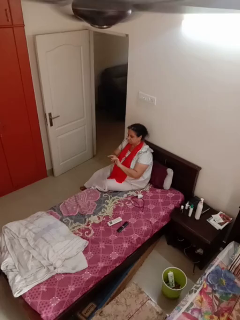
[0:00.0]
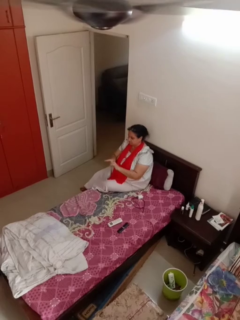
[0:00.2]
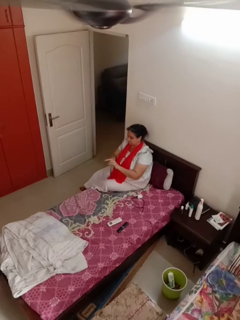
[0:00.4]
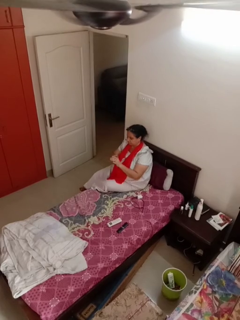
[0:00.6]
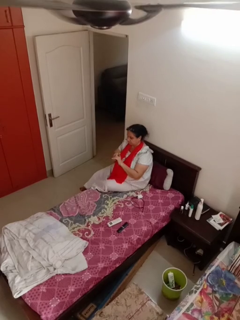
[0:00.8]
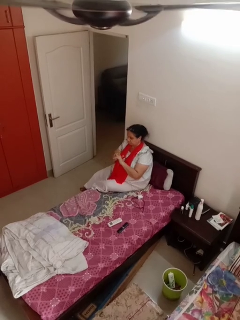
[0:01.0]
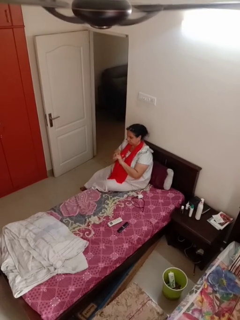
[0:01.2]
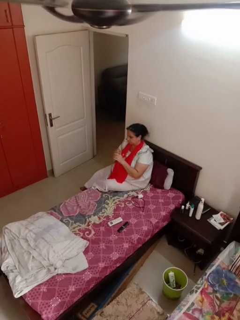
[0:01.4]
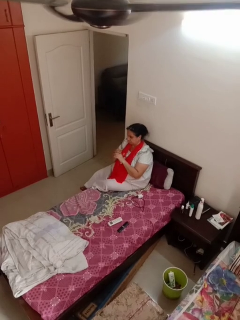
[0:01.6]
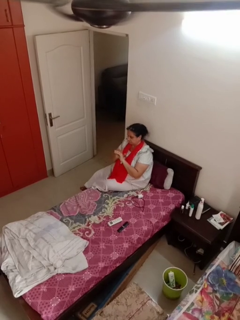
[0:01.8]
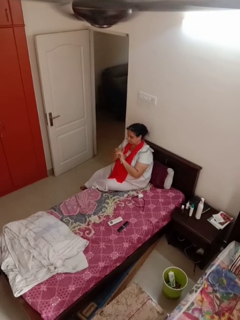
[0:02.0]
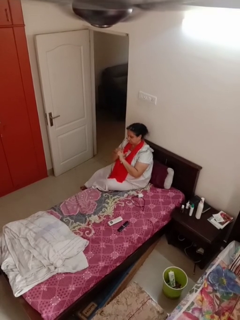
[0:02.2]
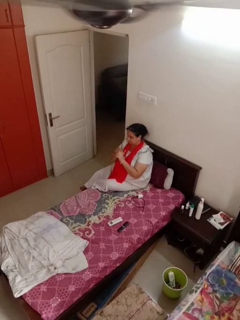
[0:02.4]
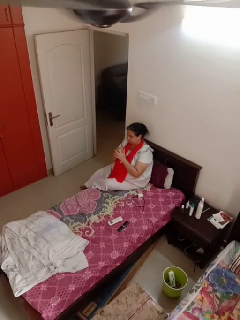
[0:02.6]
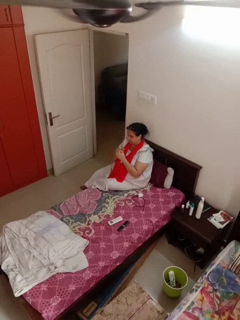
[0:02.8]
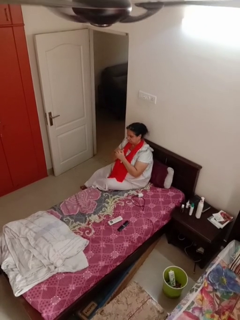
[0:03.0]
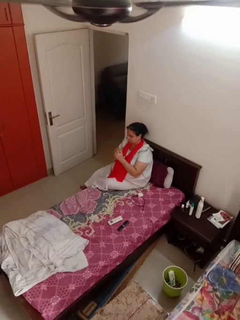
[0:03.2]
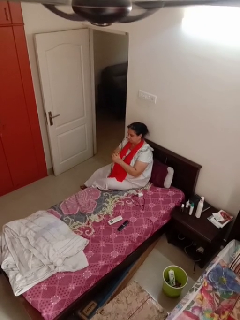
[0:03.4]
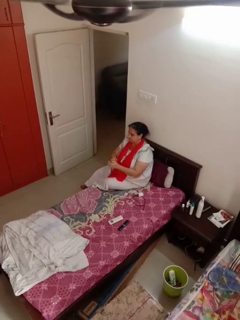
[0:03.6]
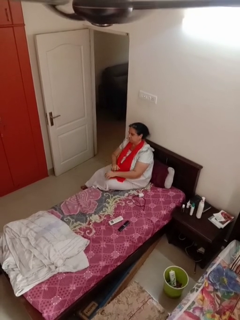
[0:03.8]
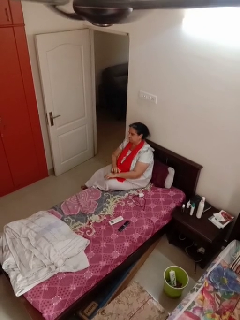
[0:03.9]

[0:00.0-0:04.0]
person cracks knuckles

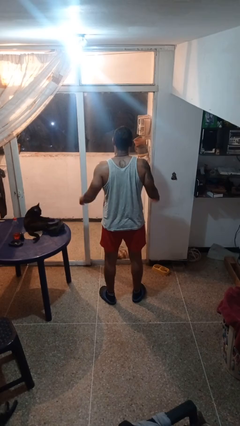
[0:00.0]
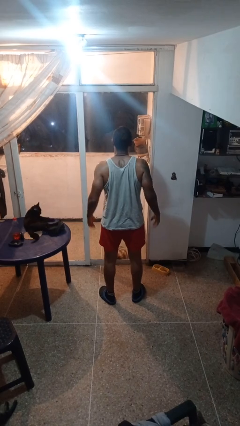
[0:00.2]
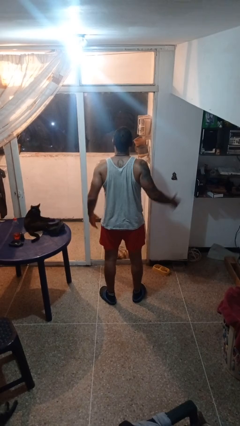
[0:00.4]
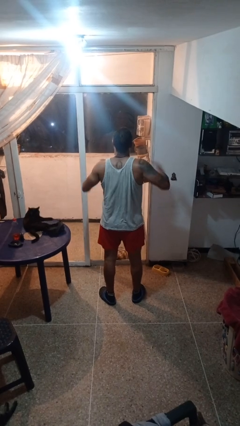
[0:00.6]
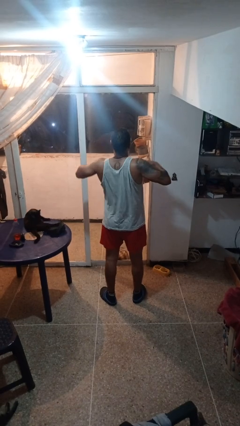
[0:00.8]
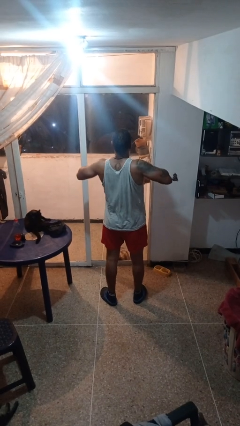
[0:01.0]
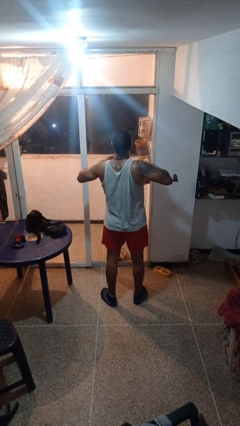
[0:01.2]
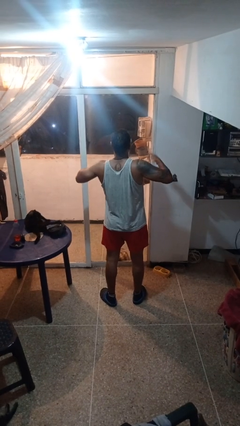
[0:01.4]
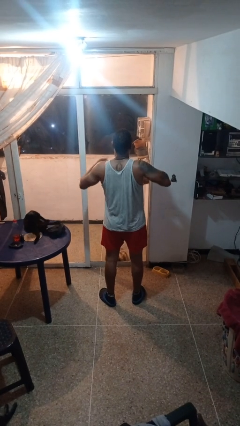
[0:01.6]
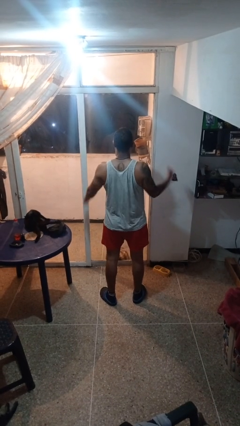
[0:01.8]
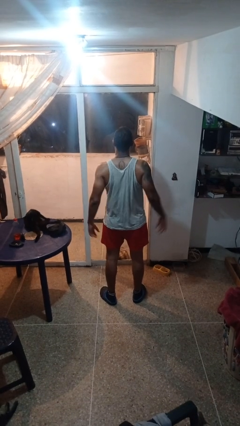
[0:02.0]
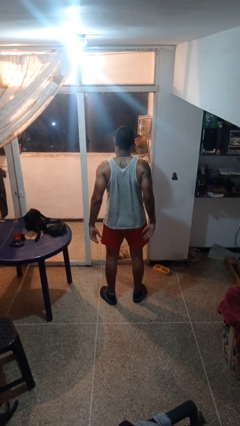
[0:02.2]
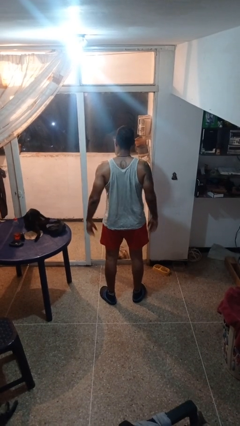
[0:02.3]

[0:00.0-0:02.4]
person drums on chest

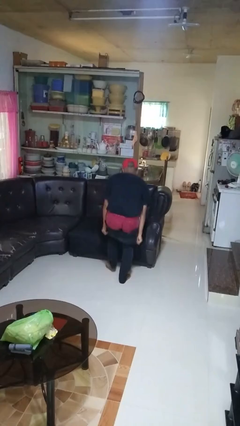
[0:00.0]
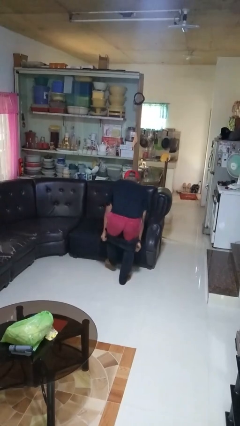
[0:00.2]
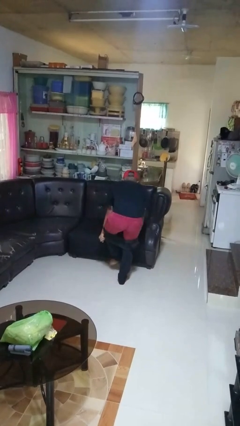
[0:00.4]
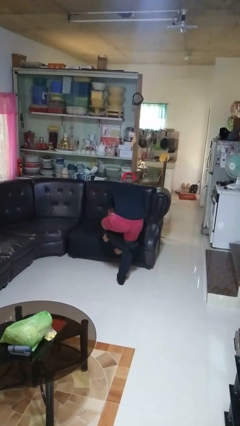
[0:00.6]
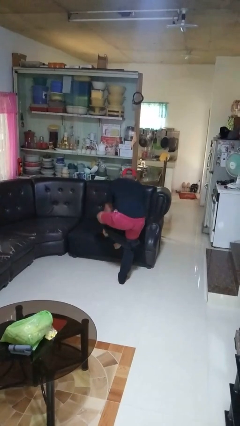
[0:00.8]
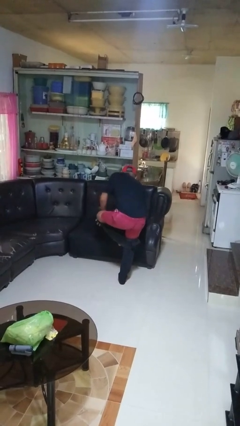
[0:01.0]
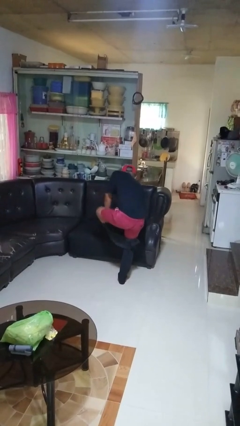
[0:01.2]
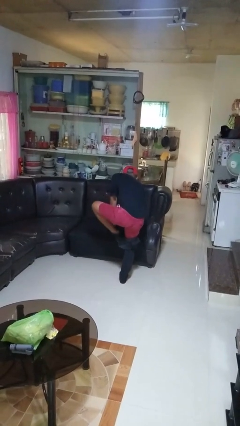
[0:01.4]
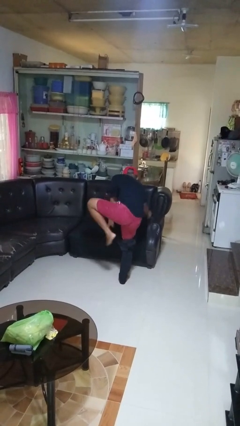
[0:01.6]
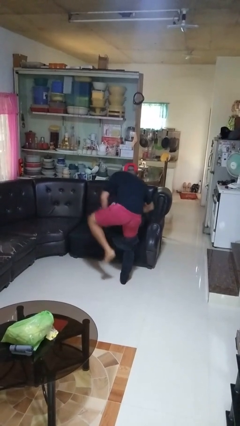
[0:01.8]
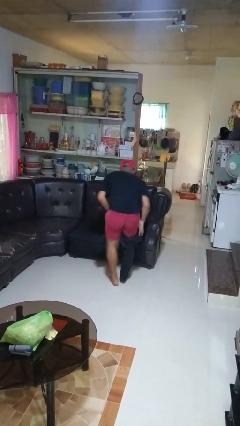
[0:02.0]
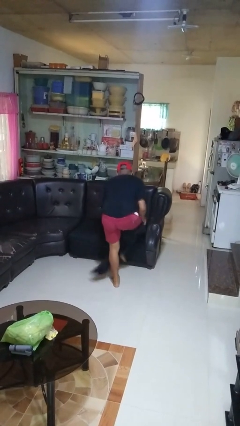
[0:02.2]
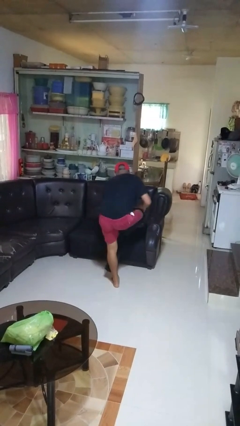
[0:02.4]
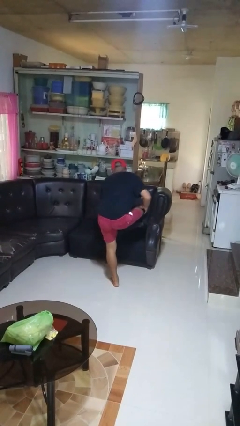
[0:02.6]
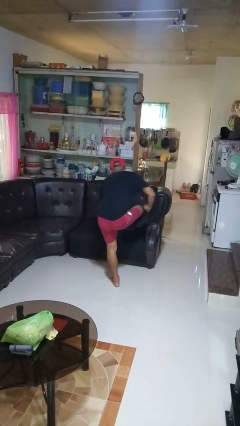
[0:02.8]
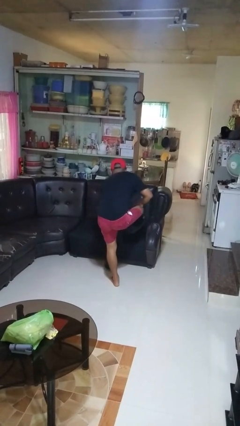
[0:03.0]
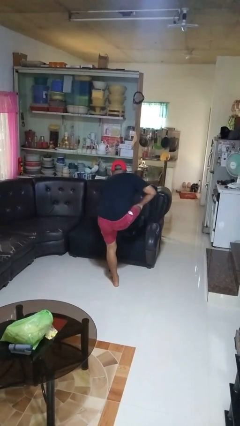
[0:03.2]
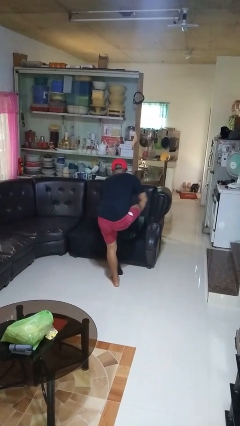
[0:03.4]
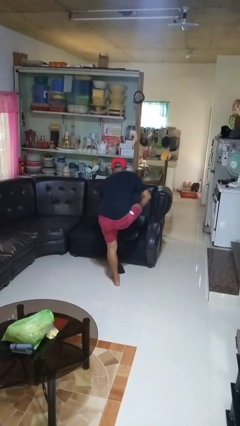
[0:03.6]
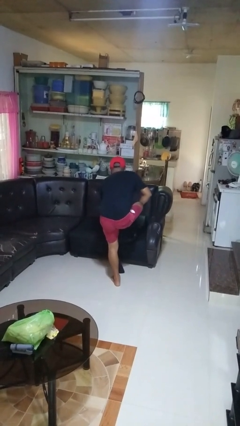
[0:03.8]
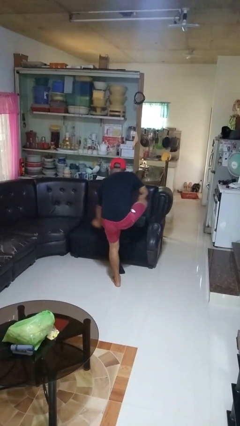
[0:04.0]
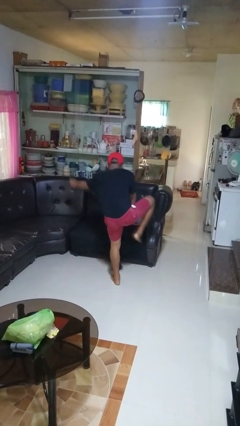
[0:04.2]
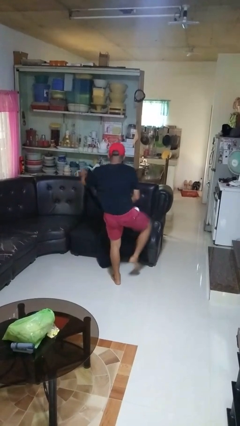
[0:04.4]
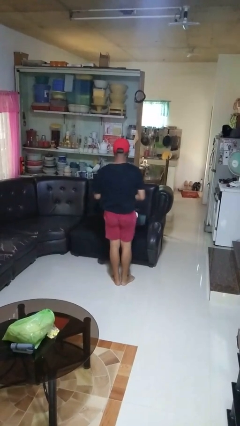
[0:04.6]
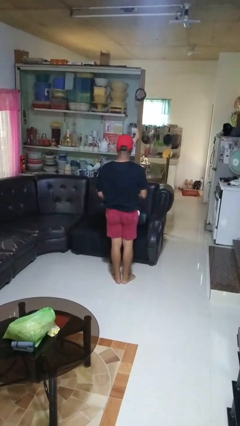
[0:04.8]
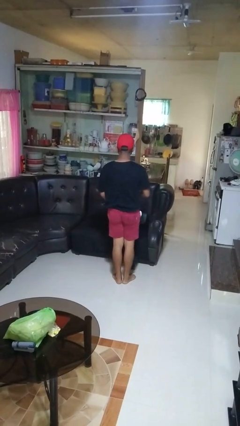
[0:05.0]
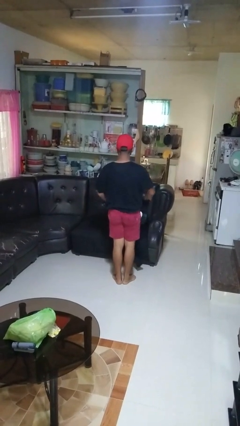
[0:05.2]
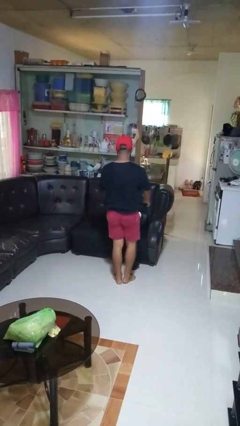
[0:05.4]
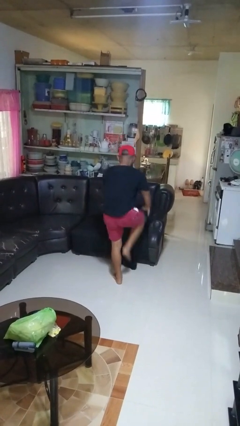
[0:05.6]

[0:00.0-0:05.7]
person takes off pants

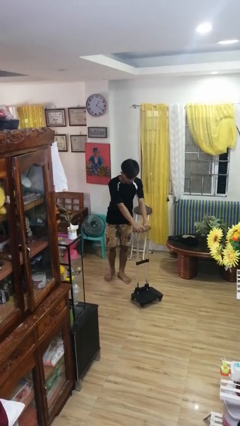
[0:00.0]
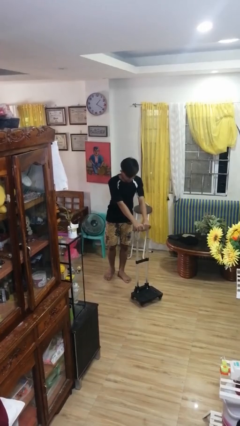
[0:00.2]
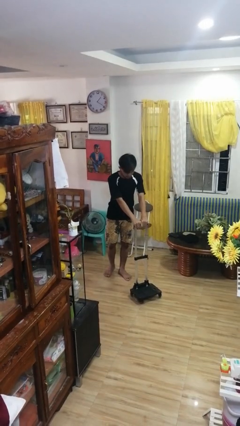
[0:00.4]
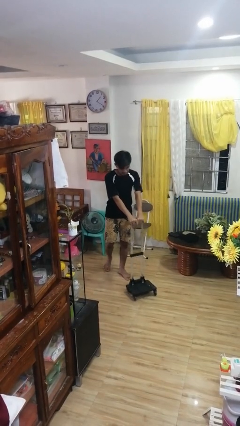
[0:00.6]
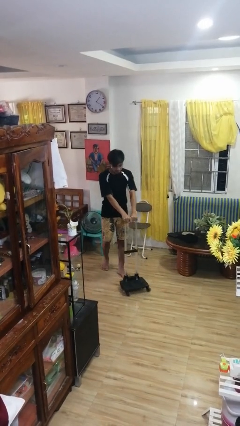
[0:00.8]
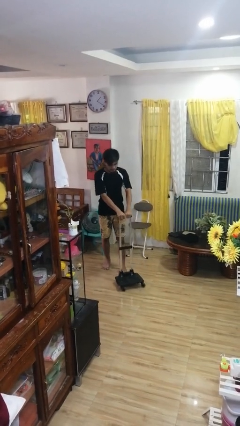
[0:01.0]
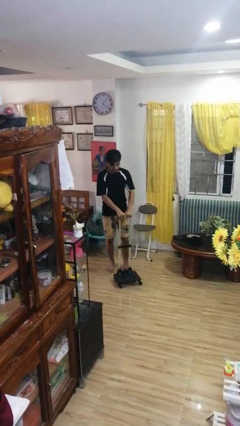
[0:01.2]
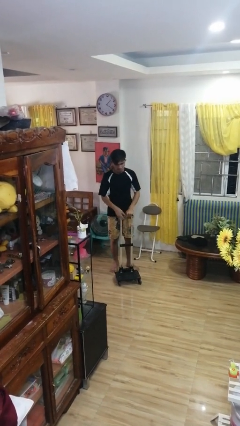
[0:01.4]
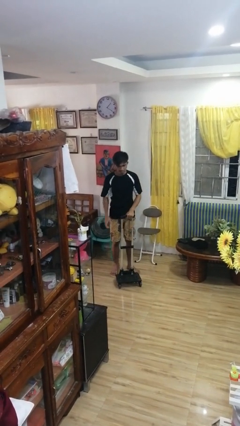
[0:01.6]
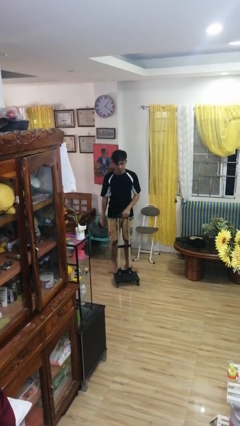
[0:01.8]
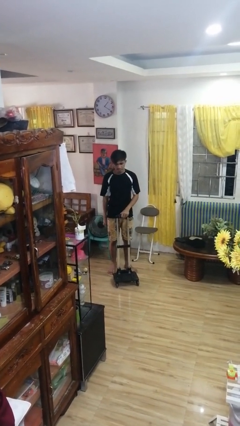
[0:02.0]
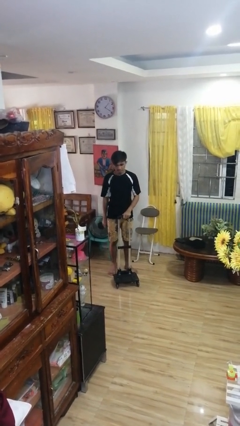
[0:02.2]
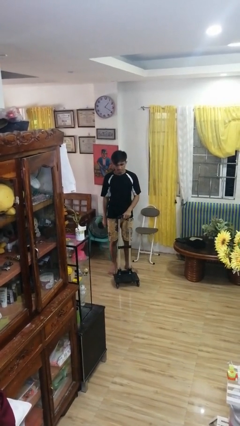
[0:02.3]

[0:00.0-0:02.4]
person pulls wheeled cart

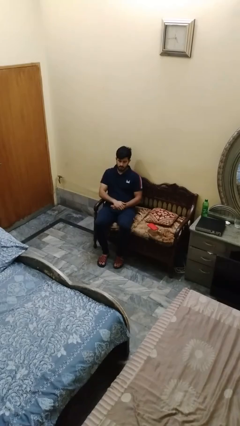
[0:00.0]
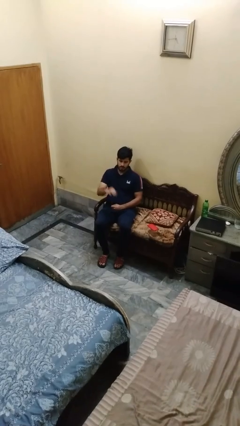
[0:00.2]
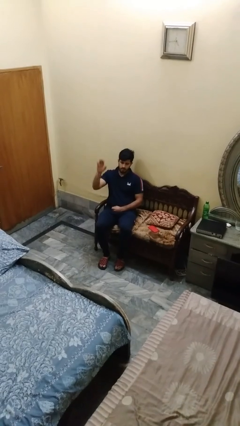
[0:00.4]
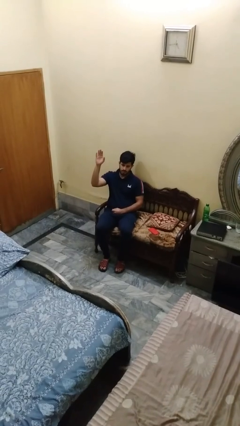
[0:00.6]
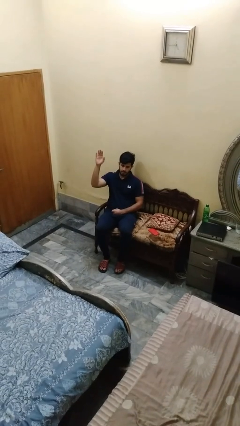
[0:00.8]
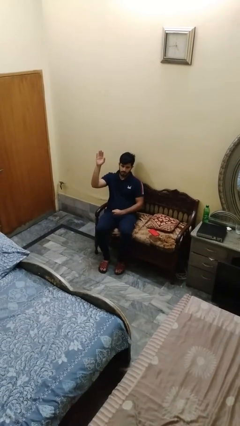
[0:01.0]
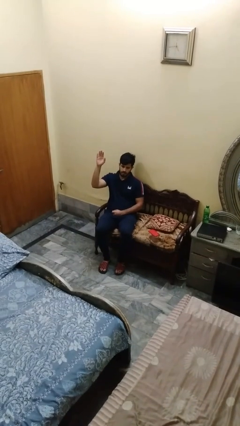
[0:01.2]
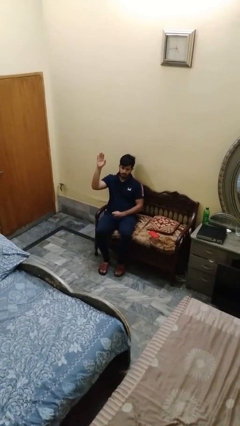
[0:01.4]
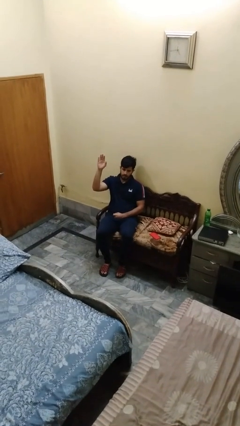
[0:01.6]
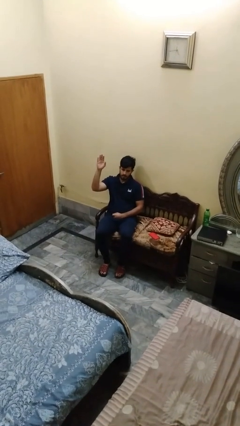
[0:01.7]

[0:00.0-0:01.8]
person gestures raise hand

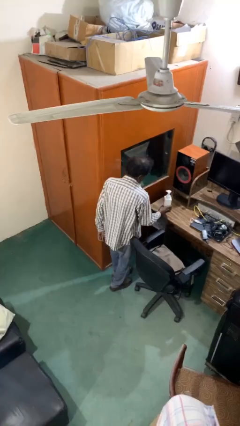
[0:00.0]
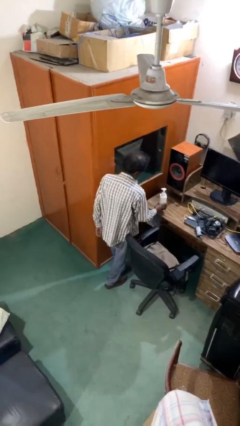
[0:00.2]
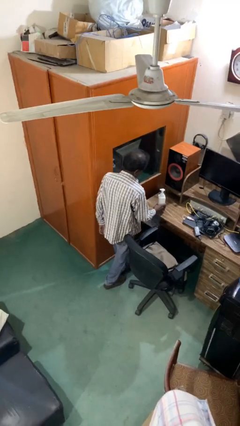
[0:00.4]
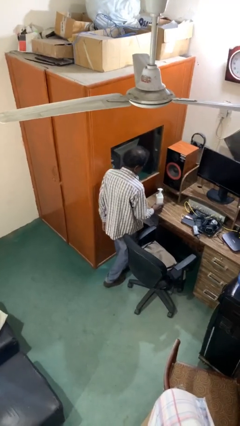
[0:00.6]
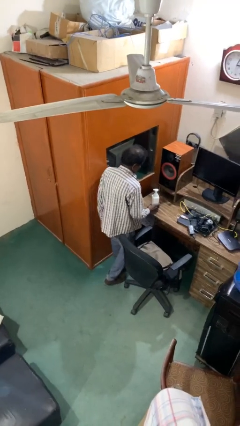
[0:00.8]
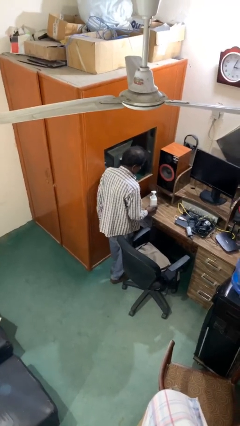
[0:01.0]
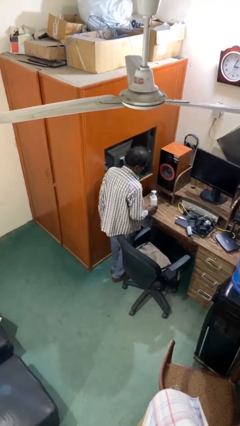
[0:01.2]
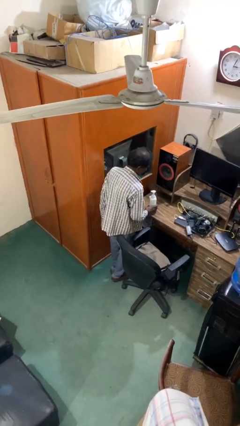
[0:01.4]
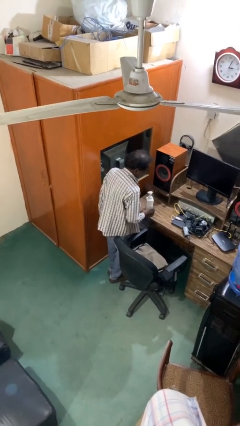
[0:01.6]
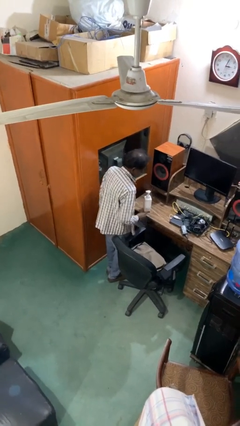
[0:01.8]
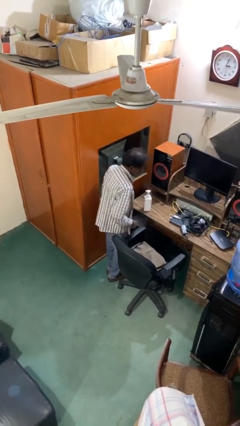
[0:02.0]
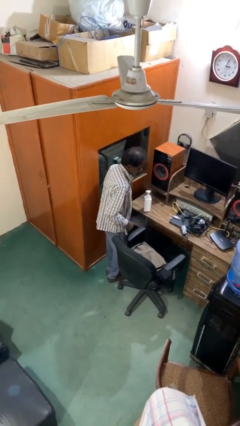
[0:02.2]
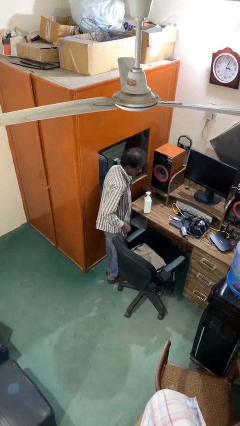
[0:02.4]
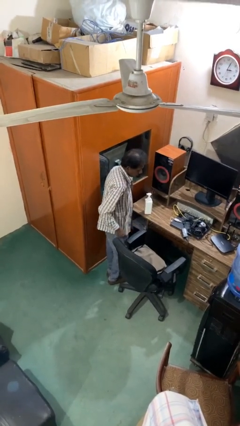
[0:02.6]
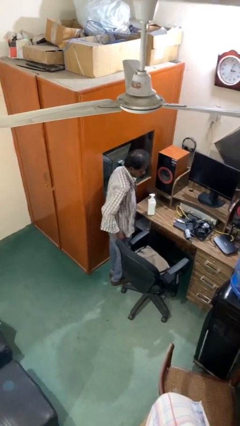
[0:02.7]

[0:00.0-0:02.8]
person puts down object on table
